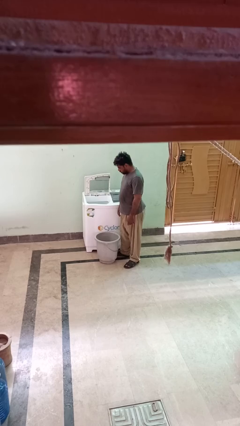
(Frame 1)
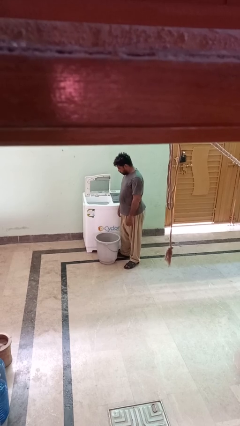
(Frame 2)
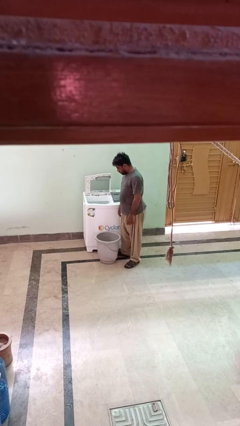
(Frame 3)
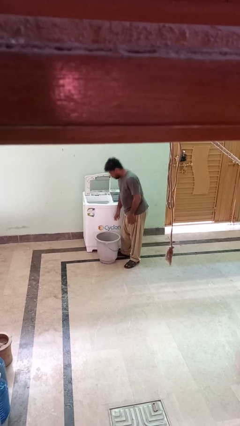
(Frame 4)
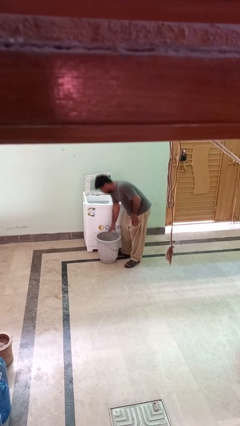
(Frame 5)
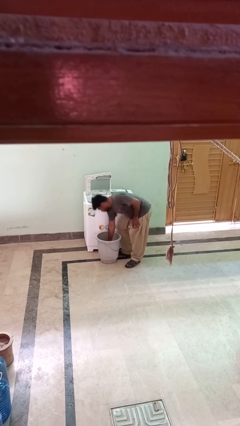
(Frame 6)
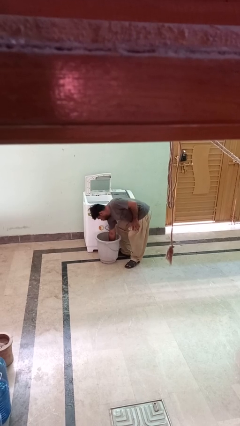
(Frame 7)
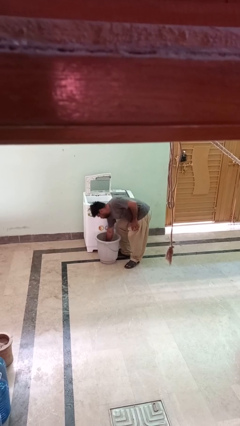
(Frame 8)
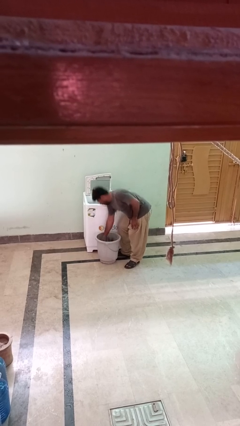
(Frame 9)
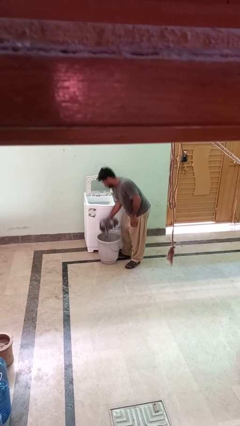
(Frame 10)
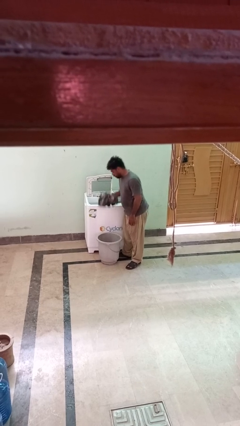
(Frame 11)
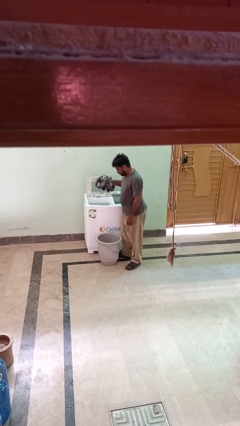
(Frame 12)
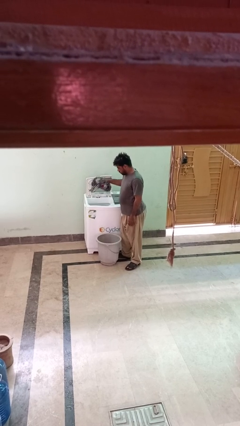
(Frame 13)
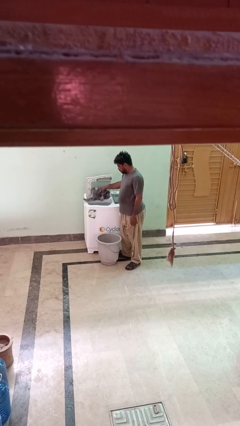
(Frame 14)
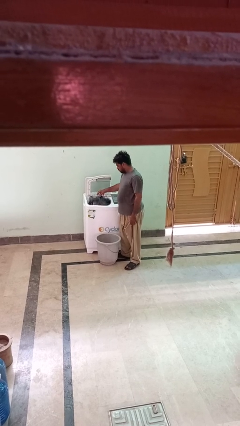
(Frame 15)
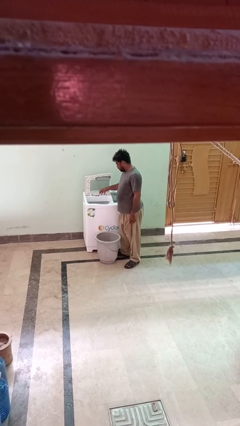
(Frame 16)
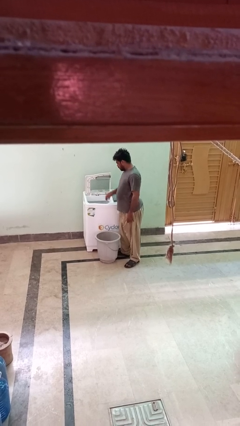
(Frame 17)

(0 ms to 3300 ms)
person loads clotheswasher

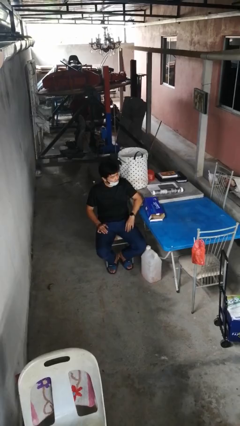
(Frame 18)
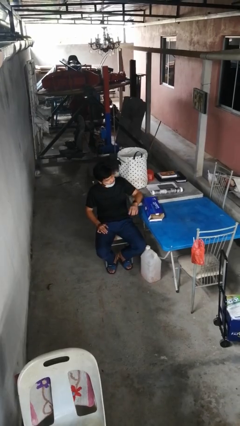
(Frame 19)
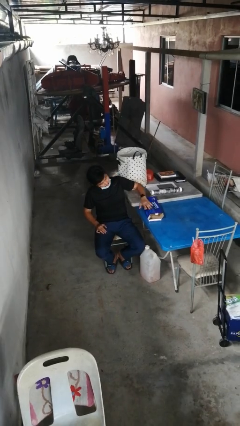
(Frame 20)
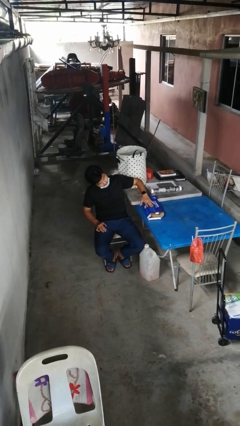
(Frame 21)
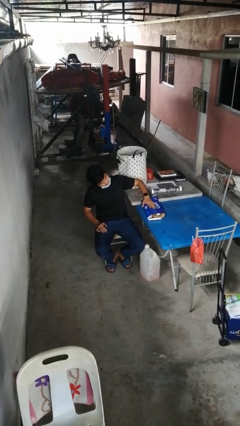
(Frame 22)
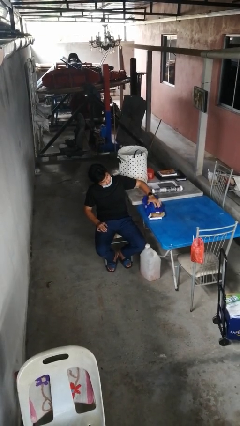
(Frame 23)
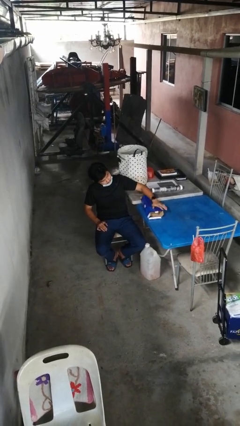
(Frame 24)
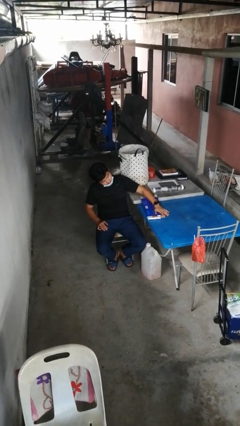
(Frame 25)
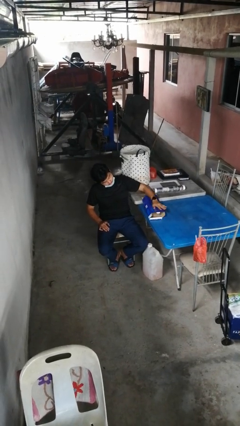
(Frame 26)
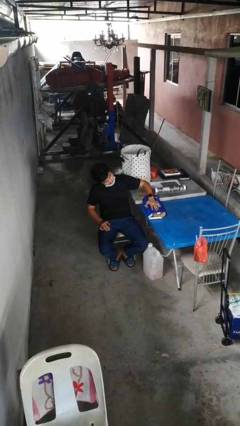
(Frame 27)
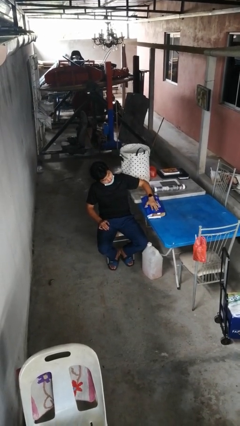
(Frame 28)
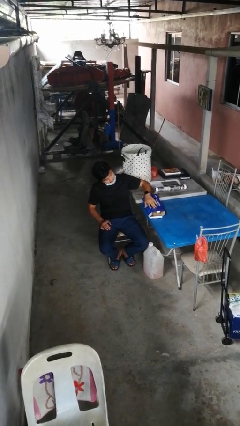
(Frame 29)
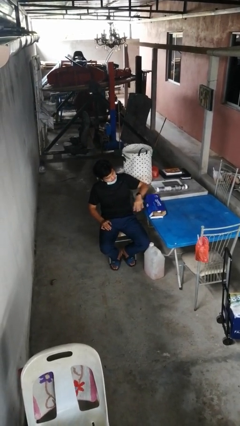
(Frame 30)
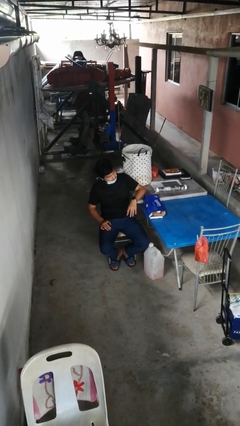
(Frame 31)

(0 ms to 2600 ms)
person taps object with finger

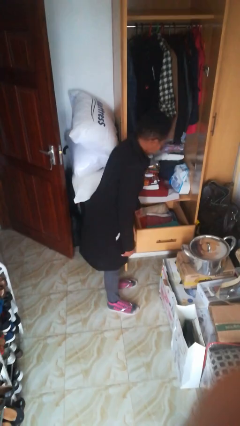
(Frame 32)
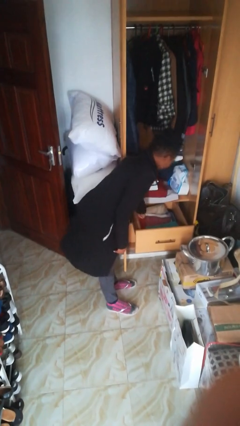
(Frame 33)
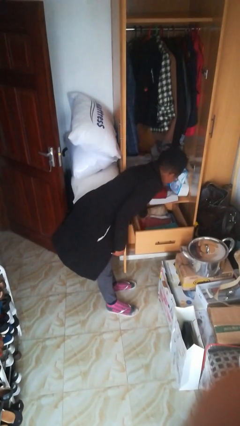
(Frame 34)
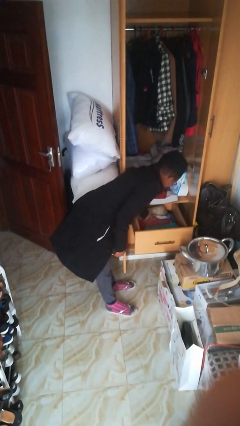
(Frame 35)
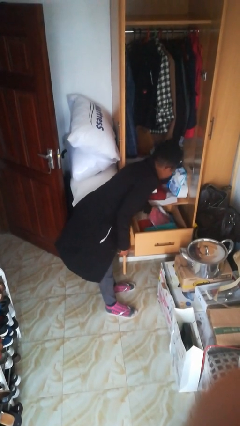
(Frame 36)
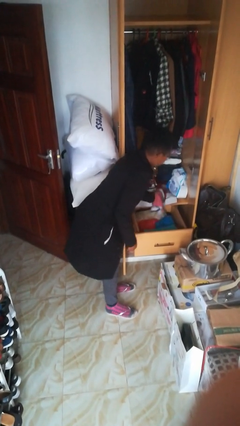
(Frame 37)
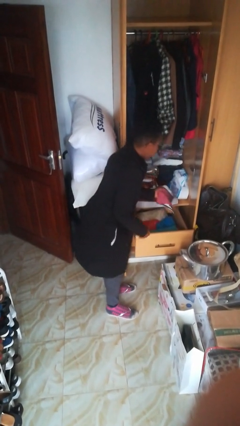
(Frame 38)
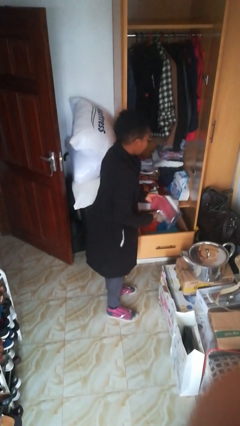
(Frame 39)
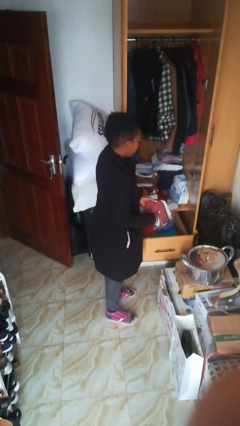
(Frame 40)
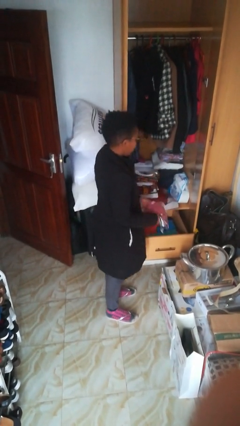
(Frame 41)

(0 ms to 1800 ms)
person takes clothes from dresser

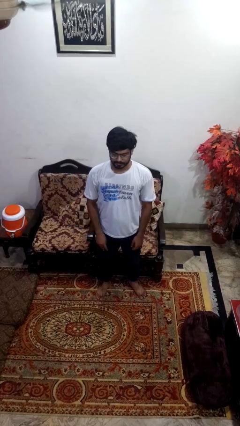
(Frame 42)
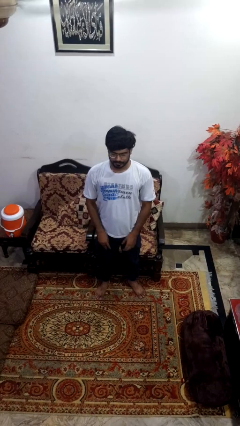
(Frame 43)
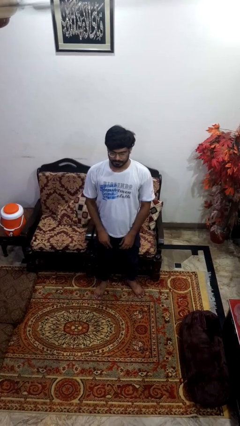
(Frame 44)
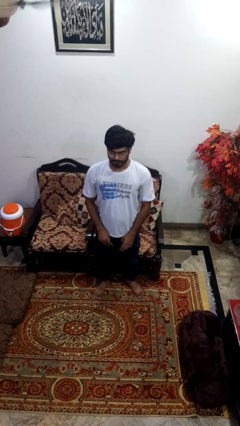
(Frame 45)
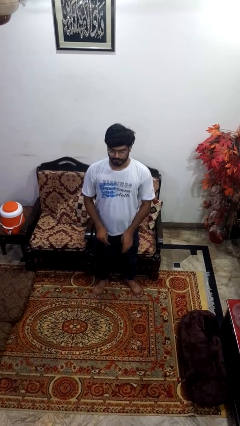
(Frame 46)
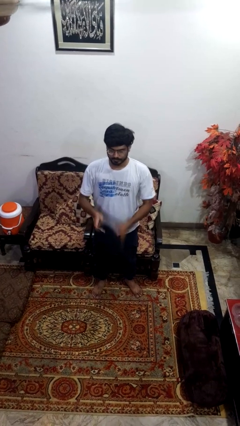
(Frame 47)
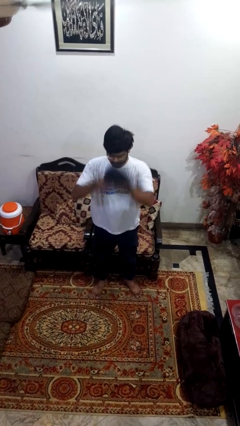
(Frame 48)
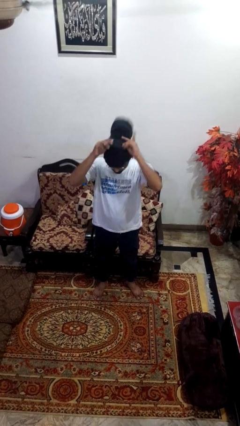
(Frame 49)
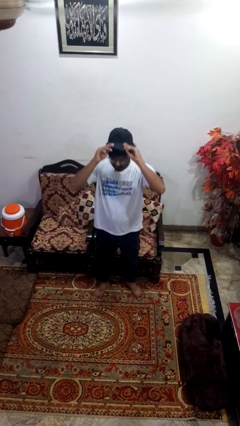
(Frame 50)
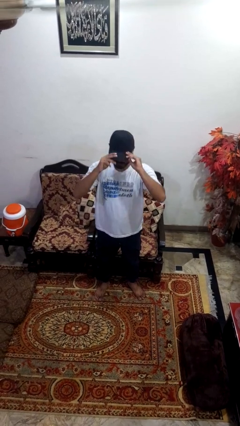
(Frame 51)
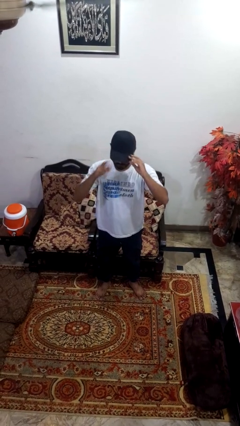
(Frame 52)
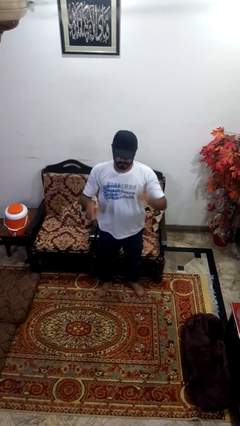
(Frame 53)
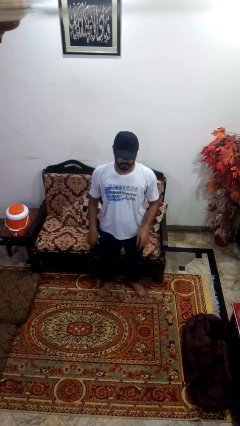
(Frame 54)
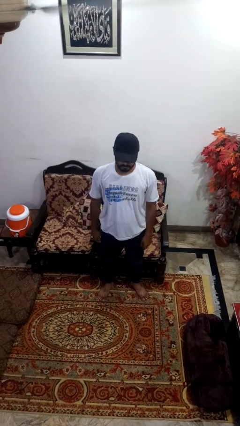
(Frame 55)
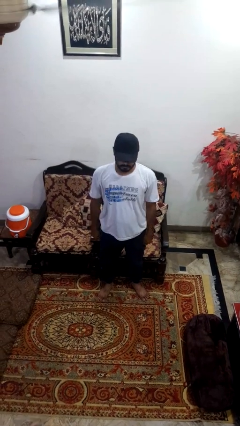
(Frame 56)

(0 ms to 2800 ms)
person puts on hat

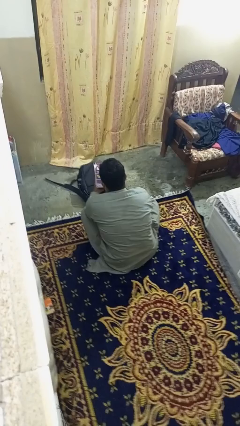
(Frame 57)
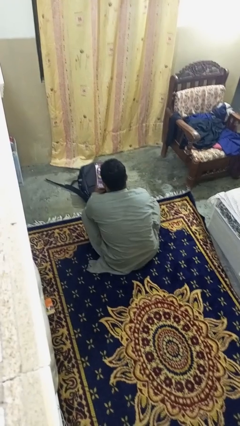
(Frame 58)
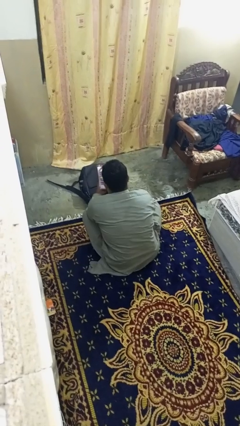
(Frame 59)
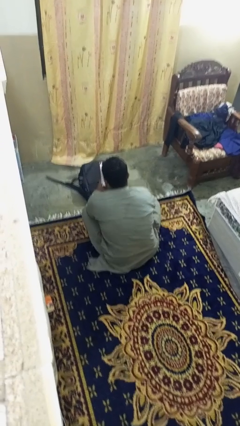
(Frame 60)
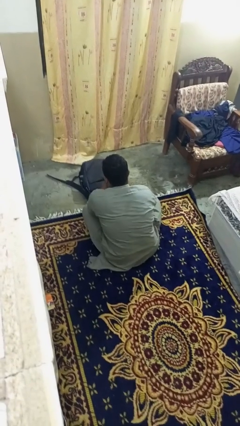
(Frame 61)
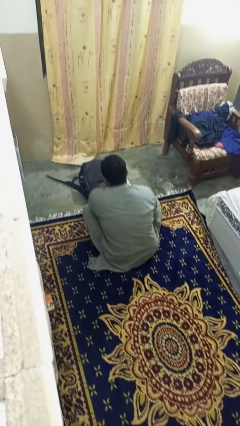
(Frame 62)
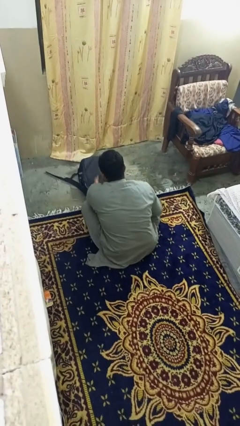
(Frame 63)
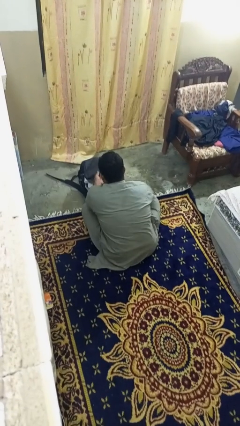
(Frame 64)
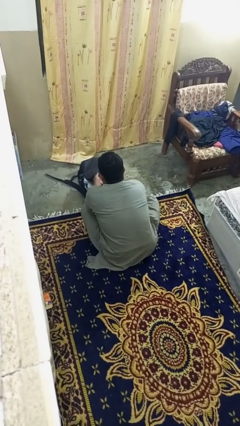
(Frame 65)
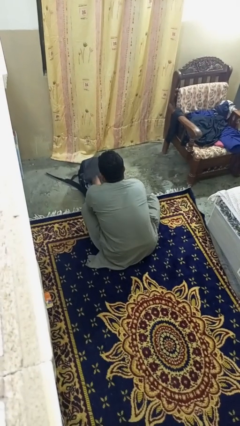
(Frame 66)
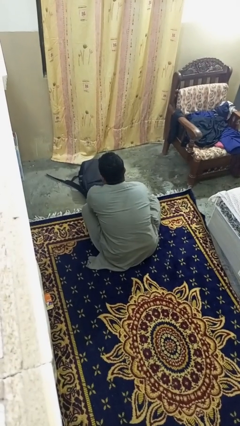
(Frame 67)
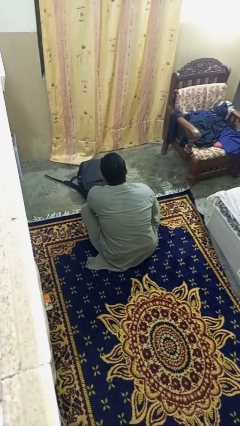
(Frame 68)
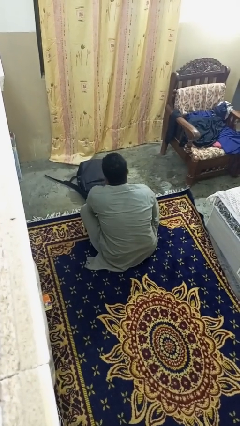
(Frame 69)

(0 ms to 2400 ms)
person puts object into bag

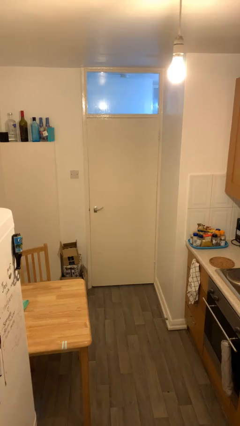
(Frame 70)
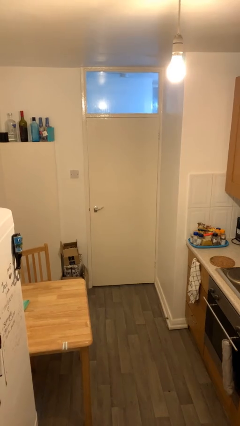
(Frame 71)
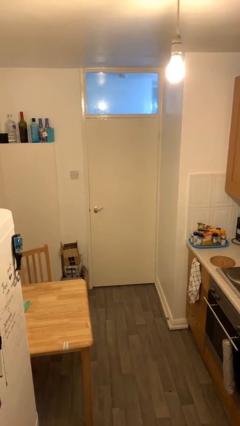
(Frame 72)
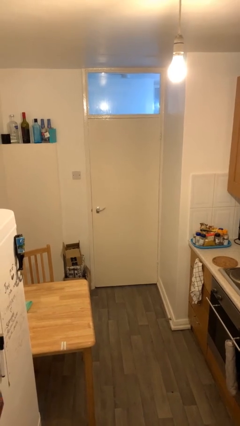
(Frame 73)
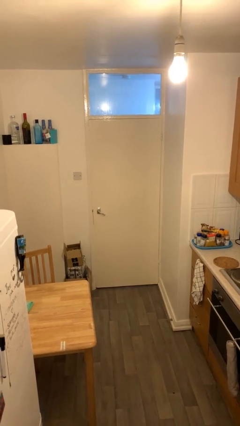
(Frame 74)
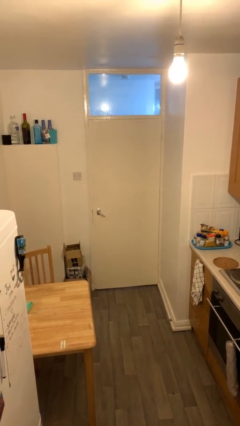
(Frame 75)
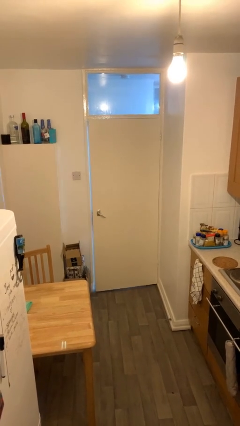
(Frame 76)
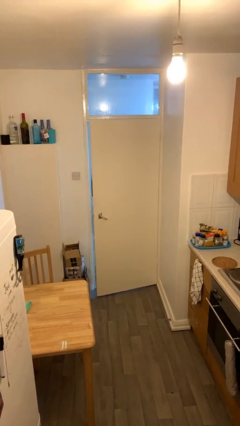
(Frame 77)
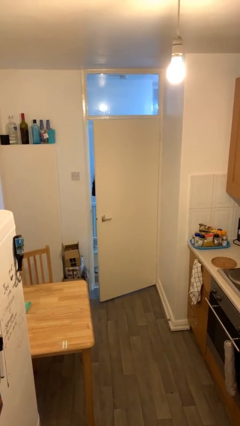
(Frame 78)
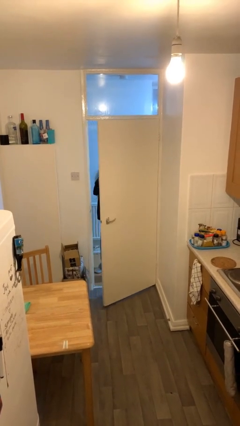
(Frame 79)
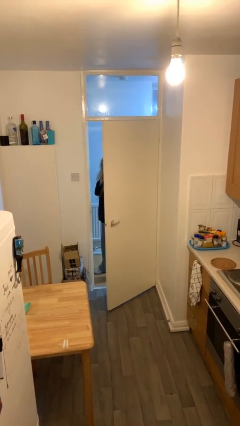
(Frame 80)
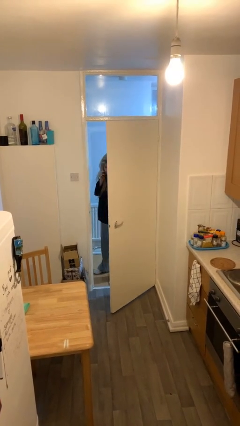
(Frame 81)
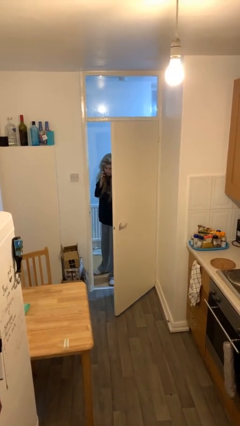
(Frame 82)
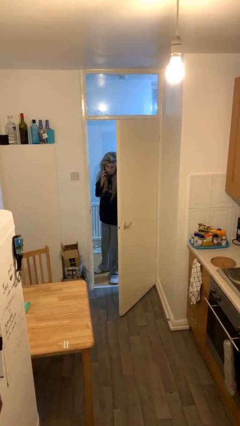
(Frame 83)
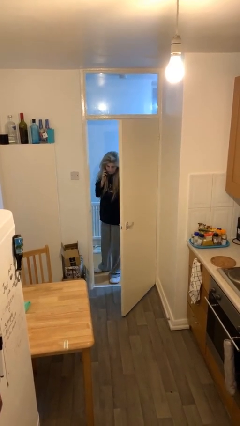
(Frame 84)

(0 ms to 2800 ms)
person opens facility door

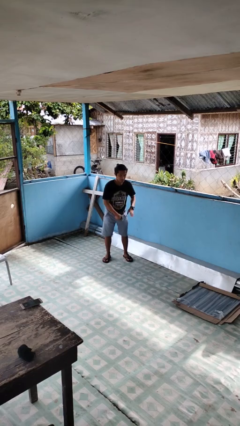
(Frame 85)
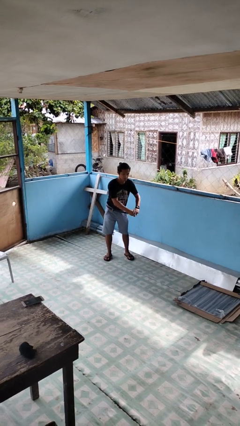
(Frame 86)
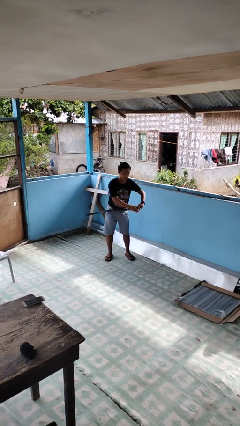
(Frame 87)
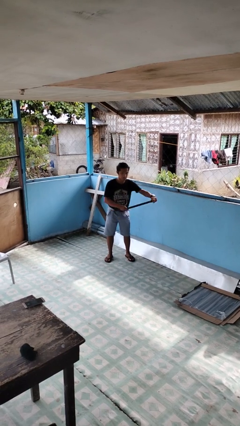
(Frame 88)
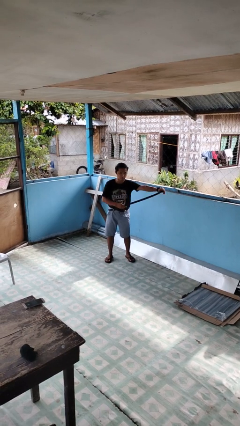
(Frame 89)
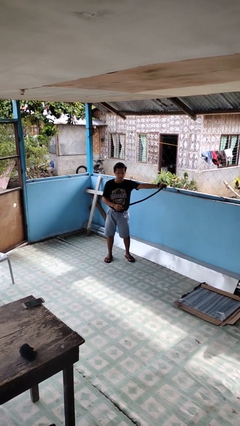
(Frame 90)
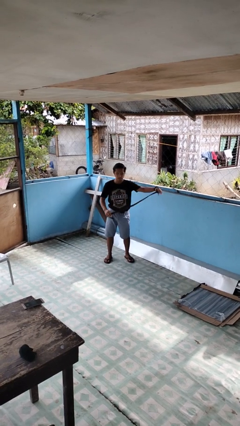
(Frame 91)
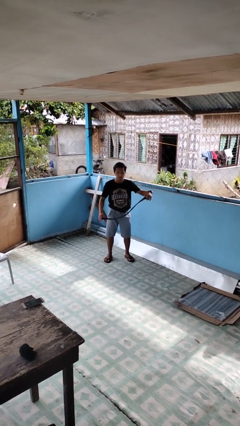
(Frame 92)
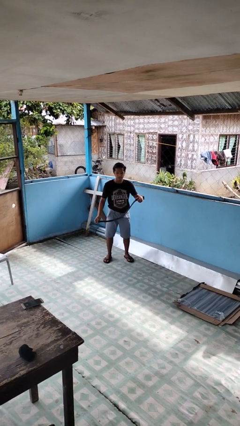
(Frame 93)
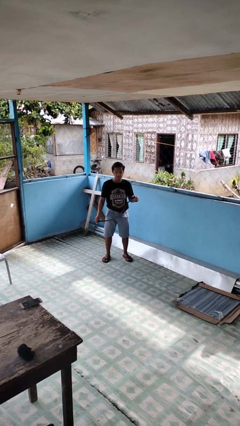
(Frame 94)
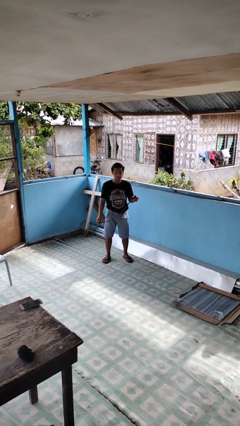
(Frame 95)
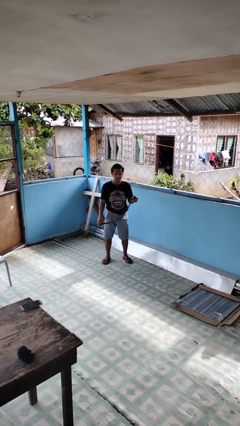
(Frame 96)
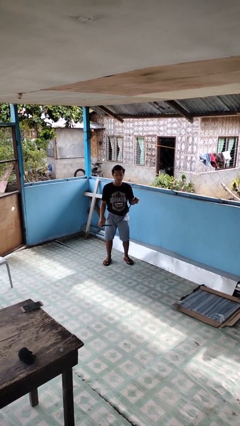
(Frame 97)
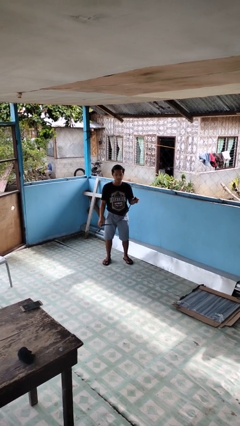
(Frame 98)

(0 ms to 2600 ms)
person takes off belt
